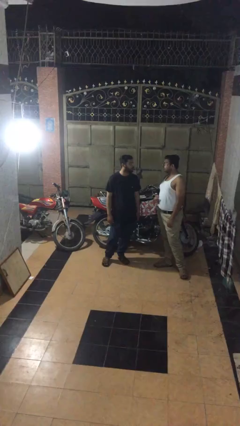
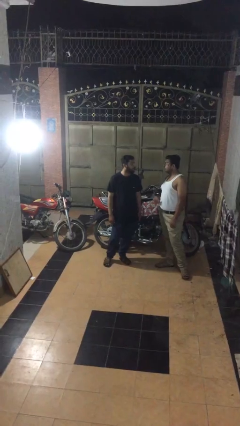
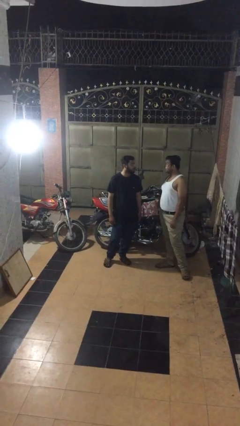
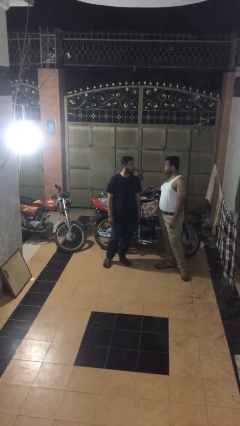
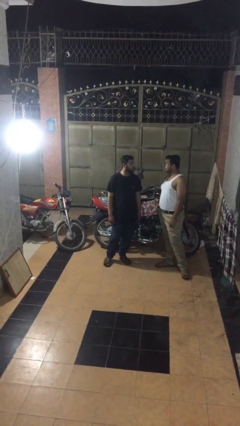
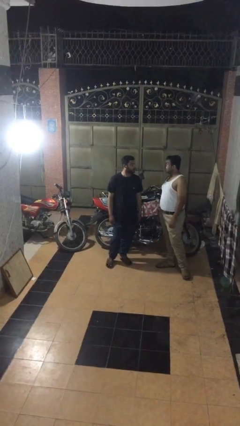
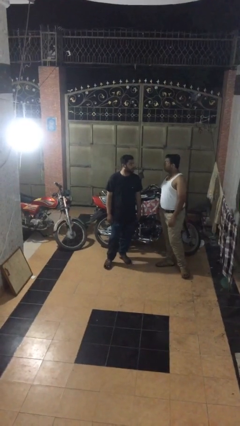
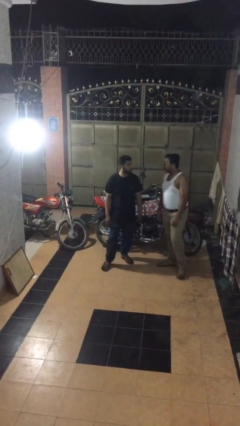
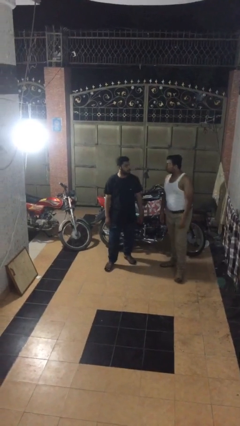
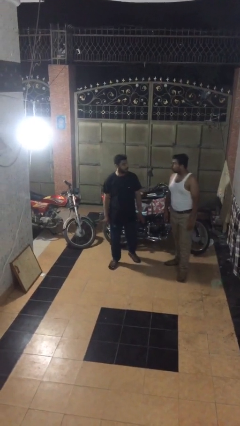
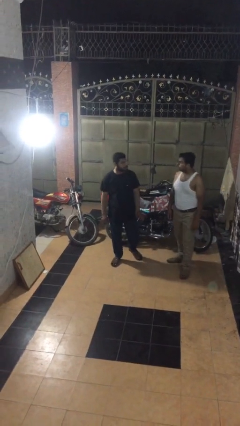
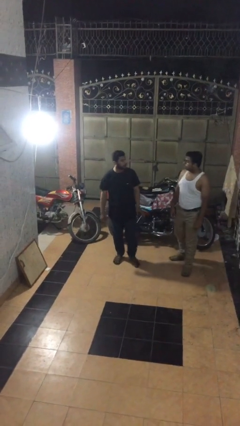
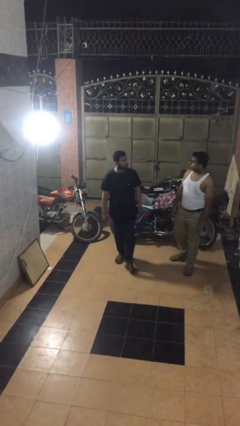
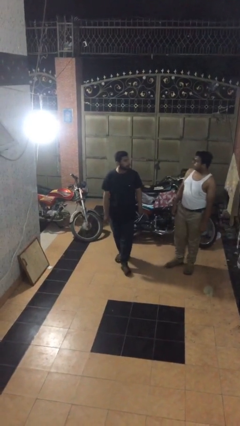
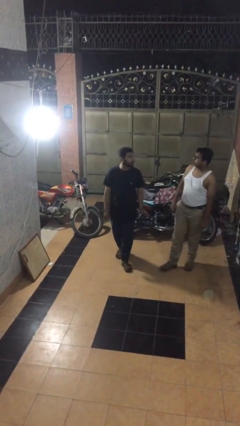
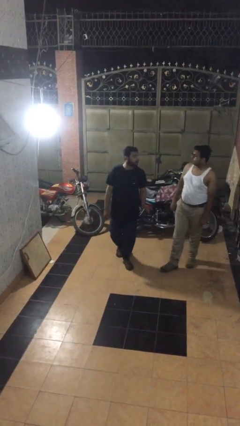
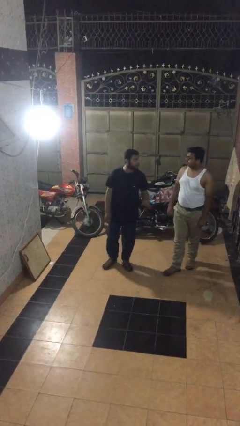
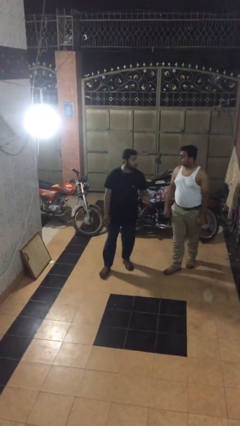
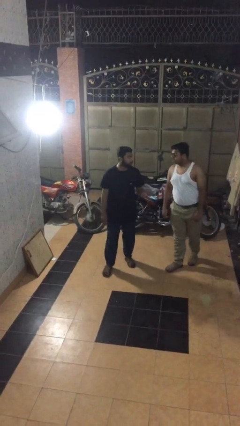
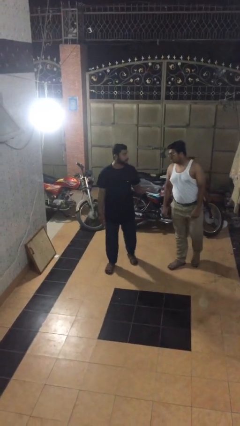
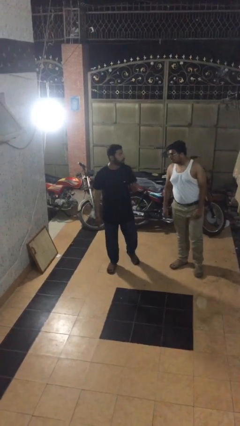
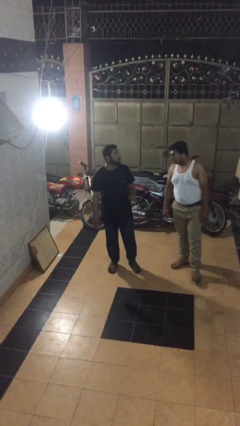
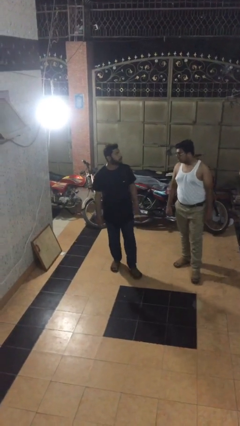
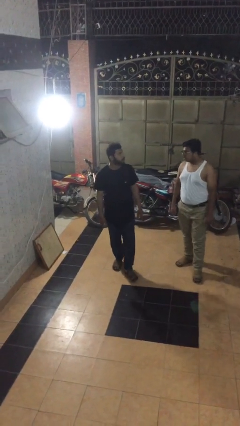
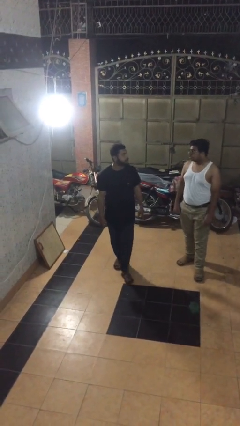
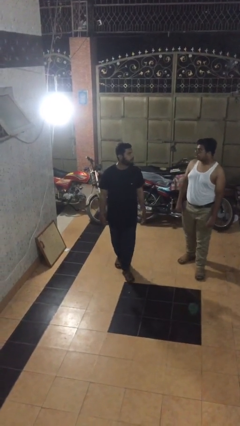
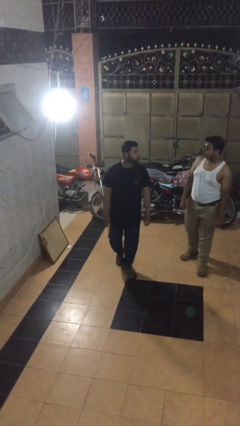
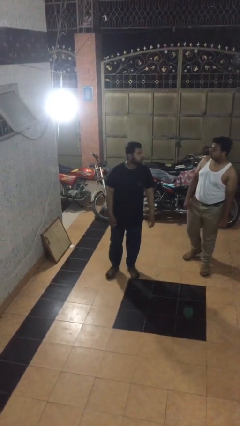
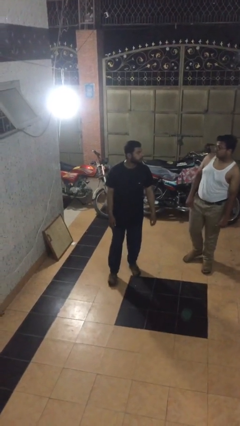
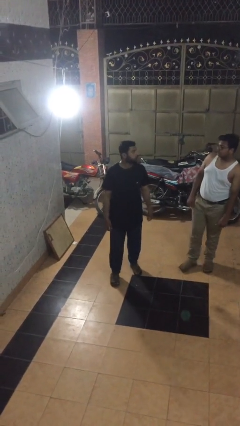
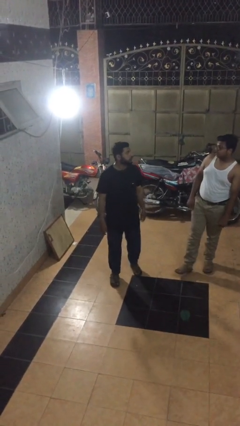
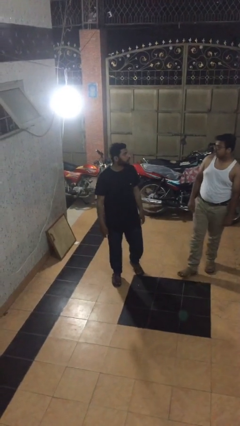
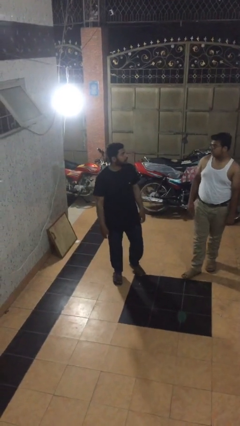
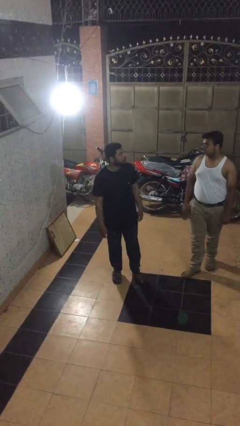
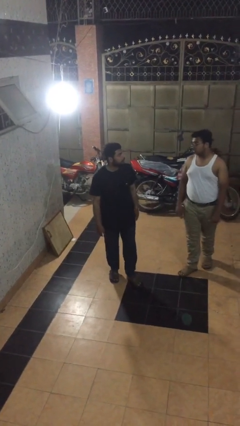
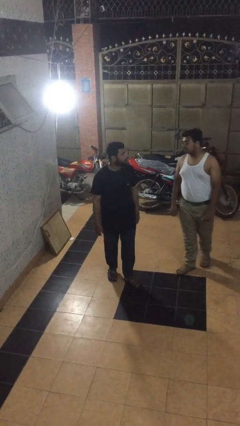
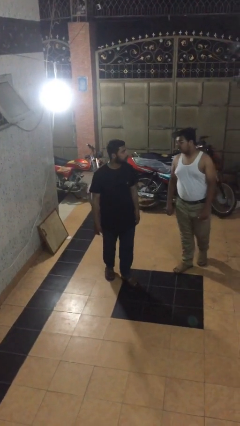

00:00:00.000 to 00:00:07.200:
person talks to person

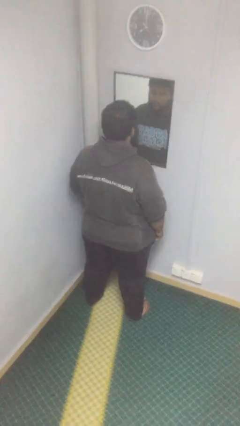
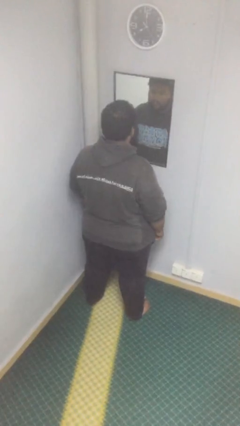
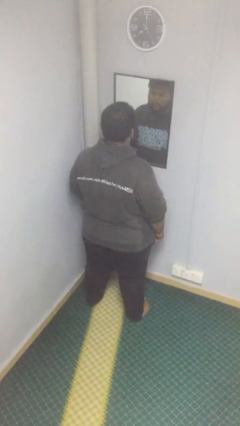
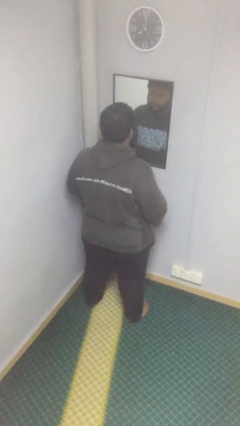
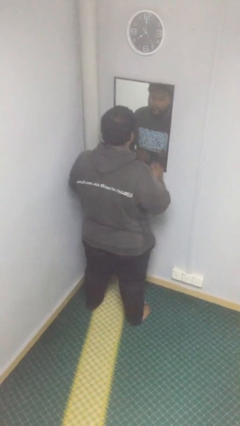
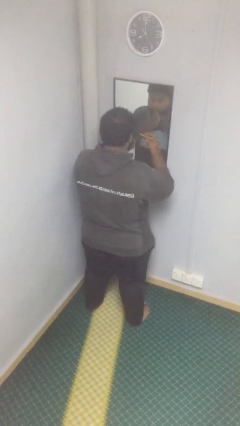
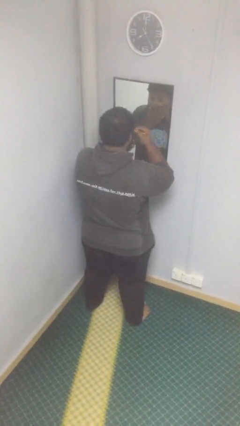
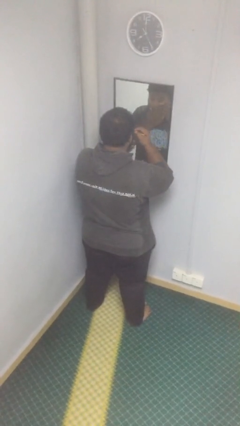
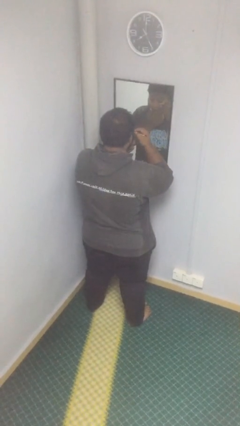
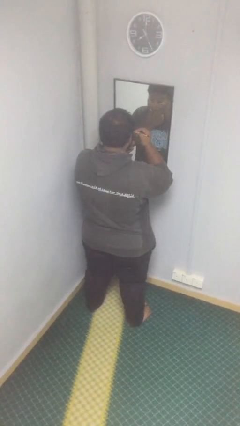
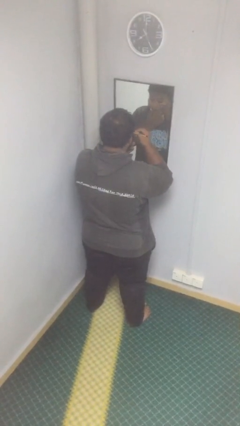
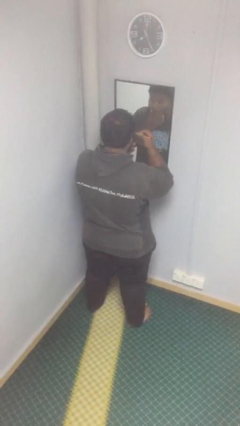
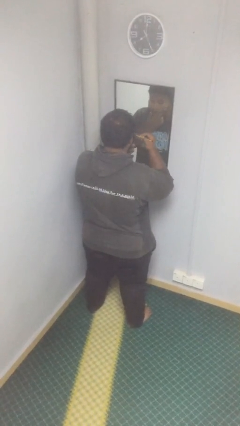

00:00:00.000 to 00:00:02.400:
person applies eye makeup

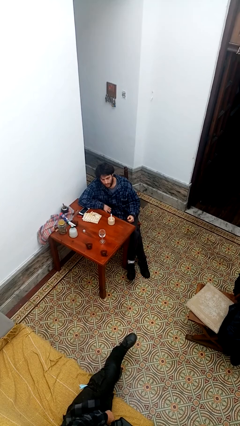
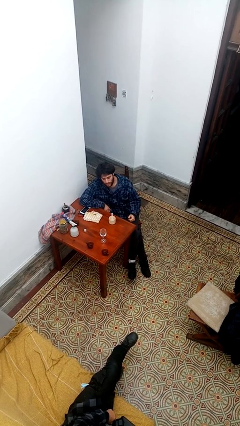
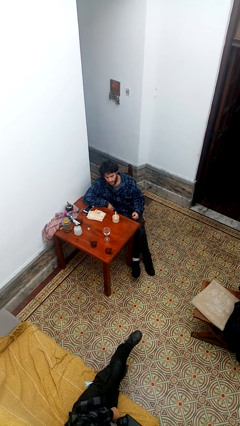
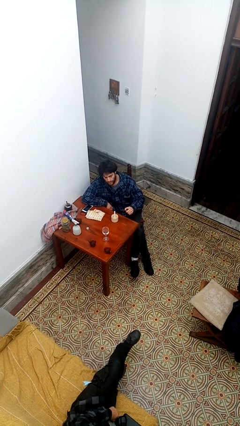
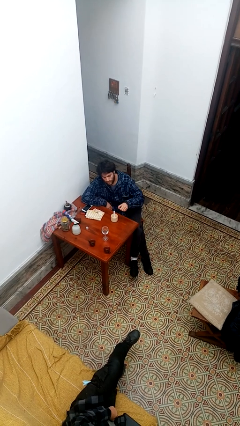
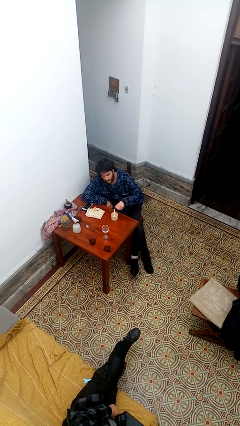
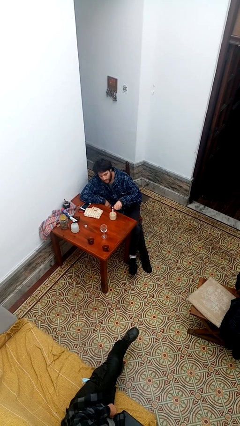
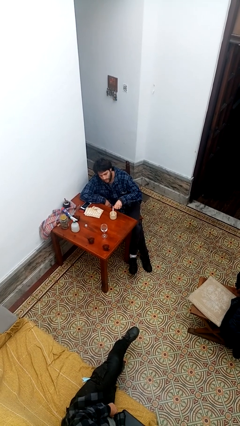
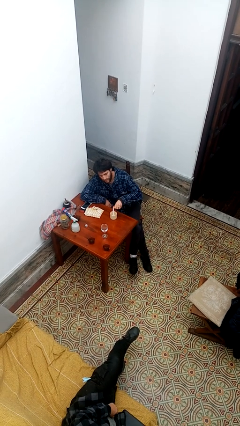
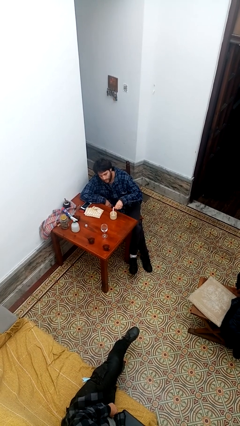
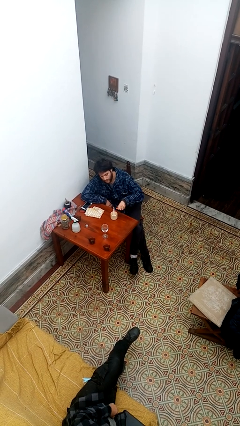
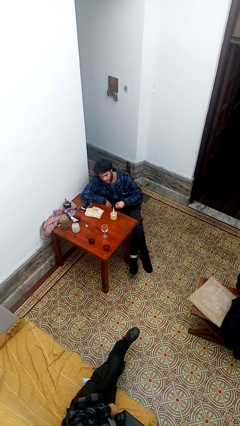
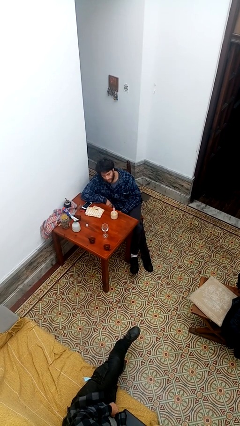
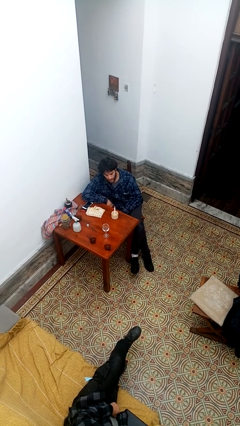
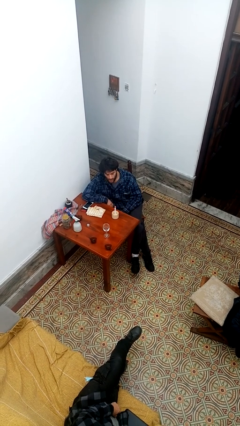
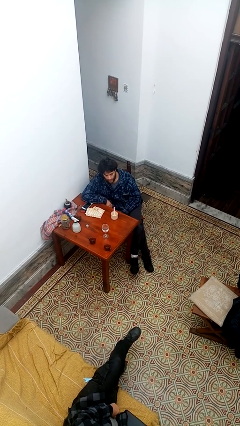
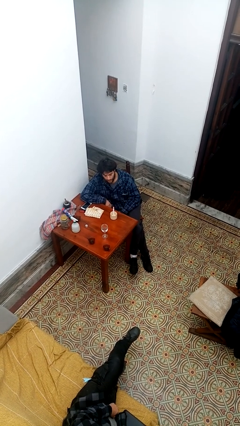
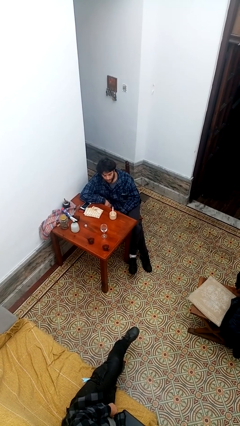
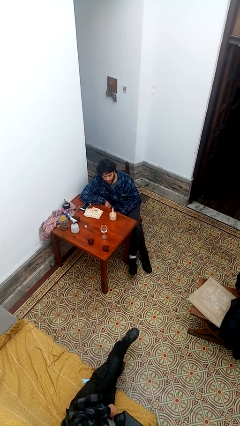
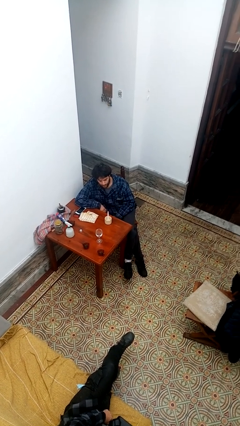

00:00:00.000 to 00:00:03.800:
person lights candle

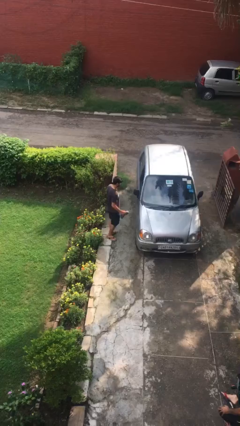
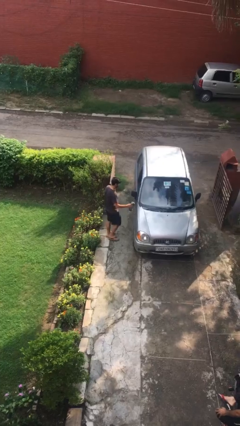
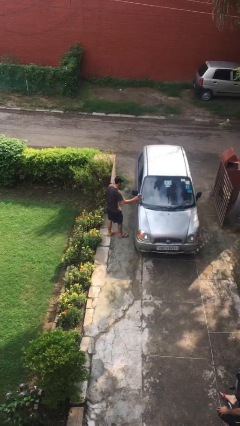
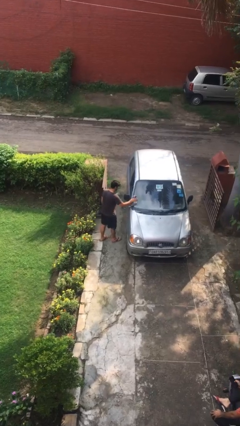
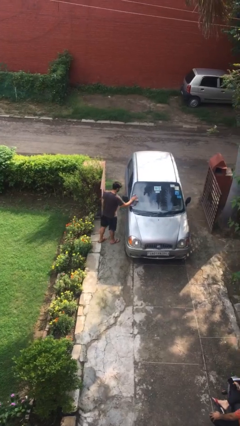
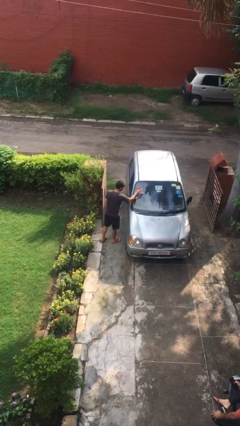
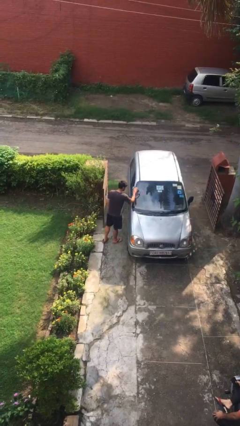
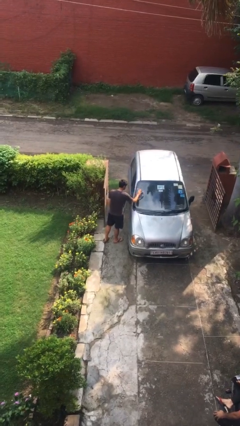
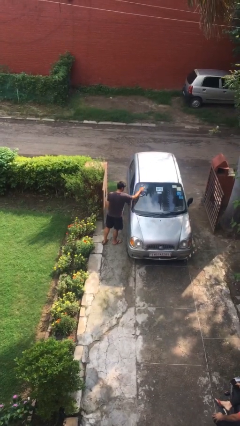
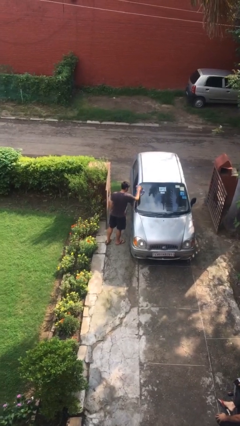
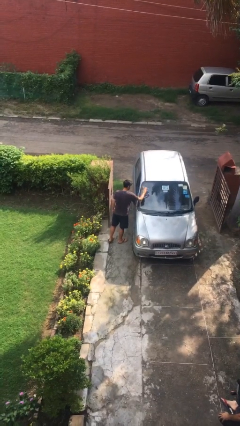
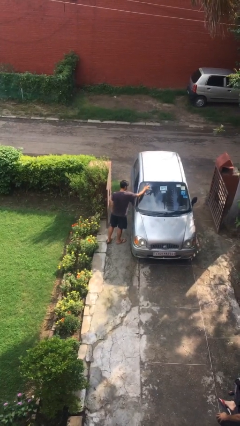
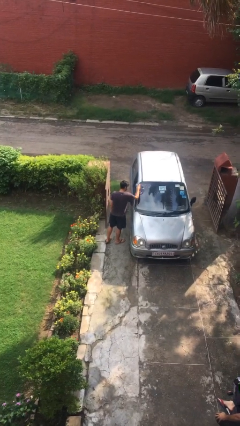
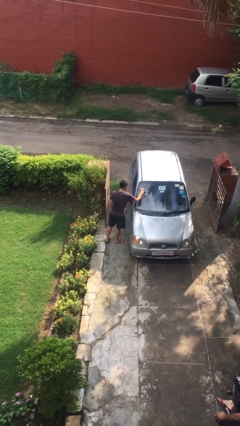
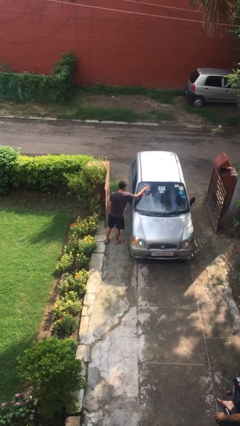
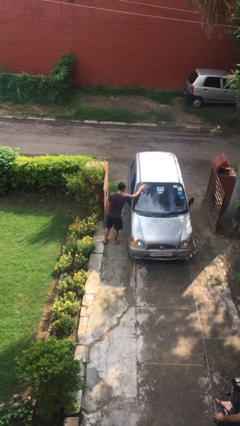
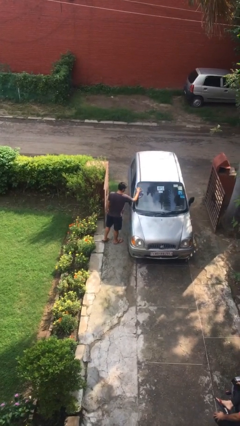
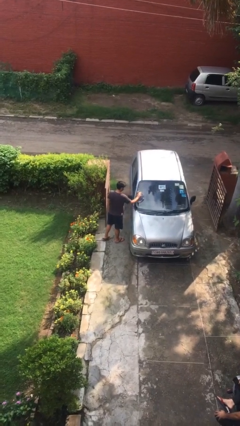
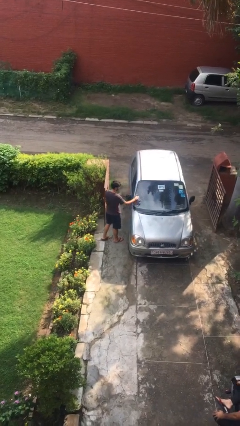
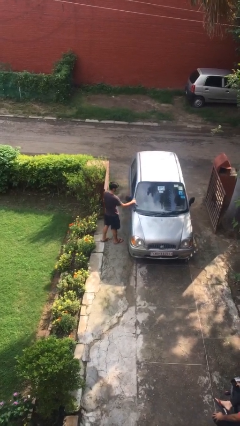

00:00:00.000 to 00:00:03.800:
person polishes car with rag

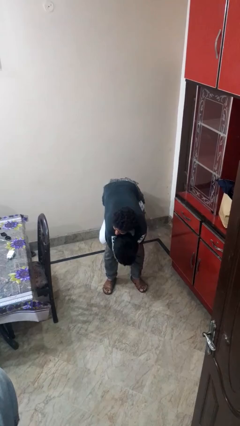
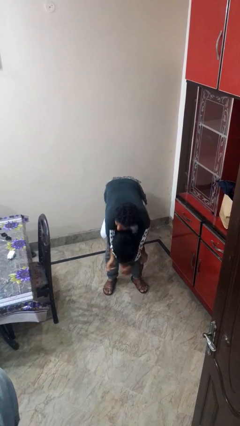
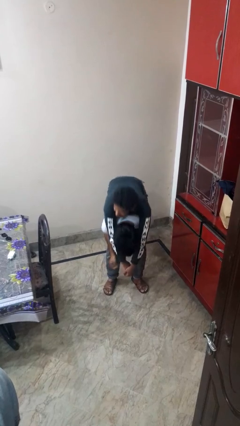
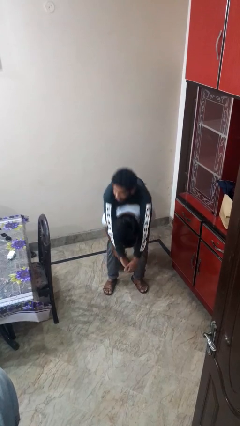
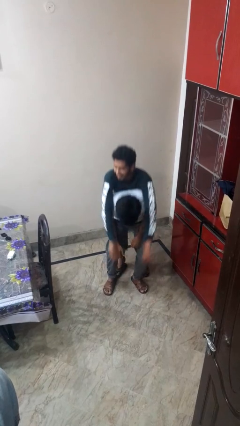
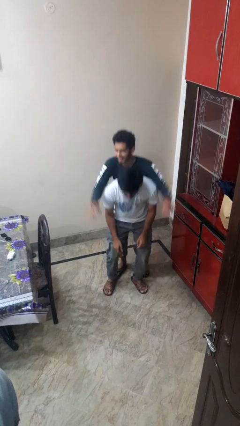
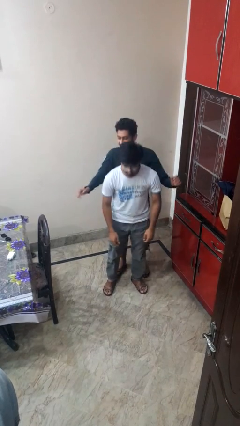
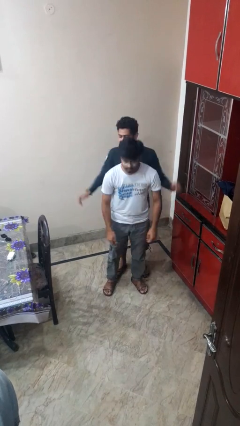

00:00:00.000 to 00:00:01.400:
person puts down person
